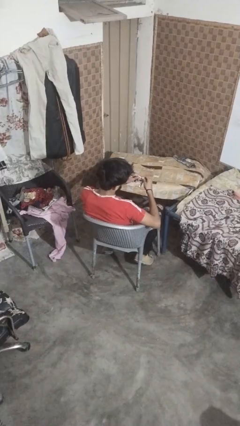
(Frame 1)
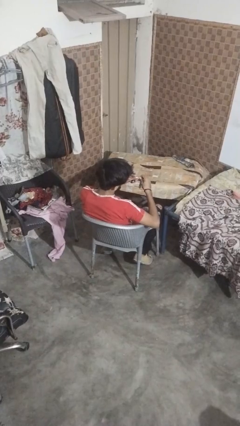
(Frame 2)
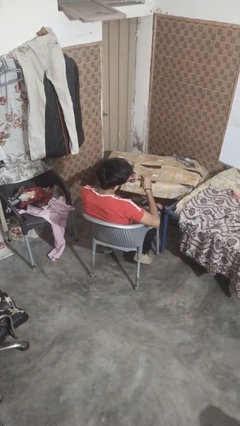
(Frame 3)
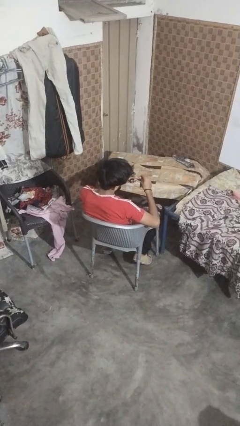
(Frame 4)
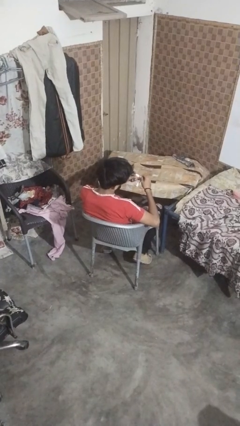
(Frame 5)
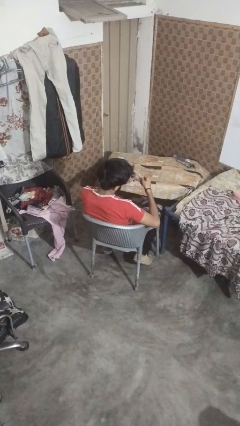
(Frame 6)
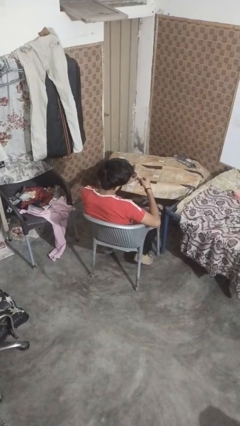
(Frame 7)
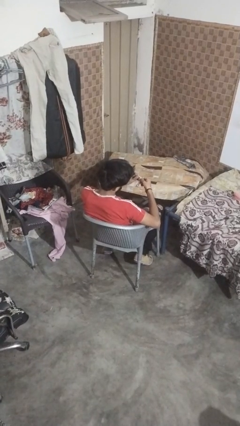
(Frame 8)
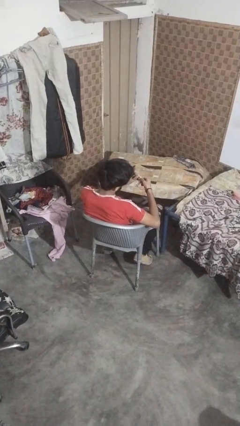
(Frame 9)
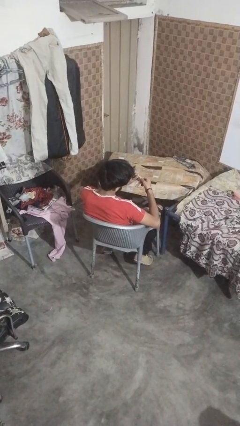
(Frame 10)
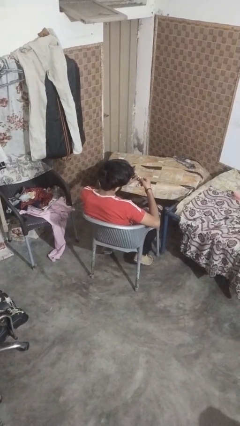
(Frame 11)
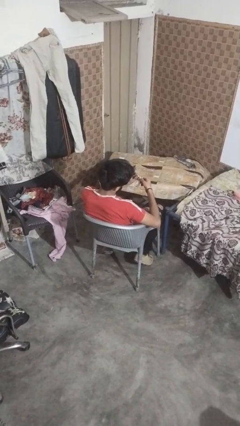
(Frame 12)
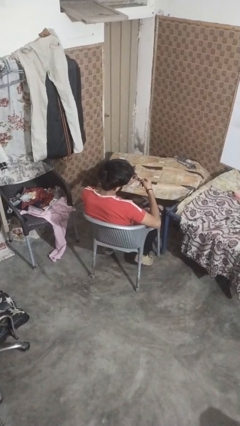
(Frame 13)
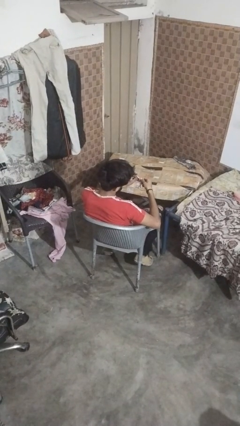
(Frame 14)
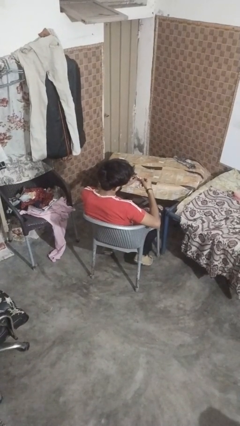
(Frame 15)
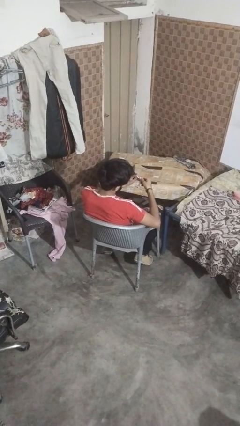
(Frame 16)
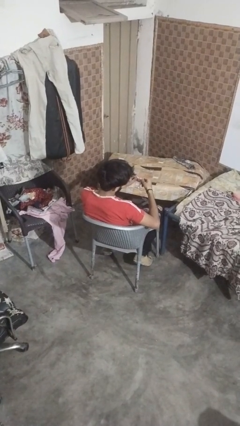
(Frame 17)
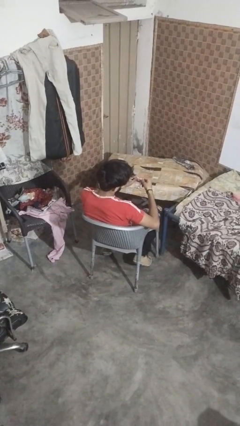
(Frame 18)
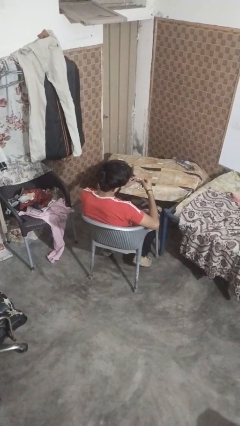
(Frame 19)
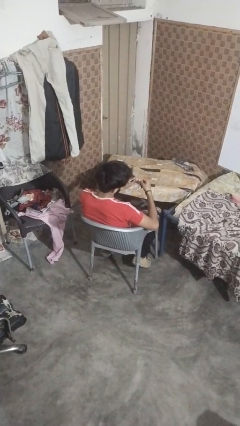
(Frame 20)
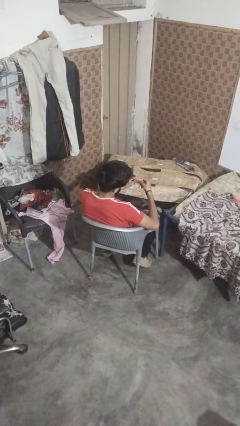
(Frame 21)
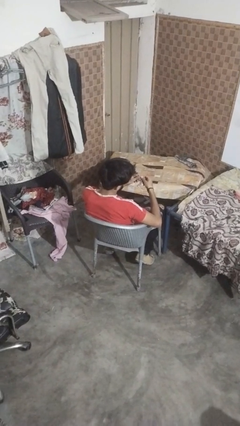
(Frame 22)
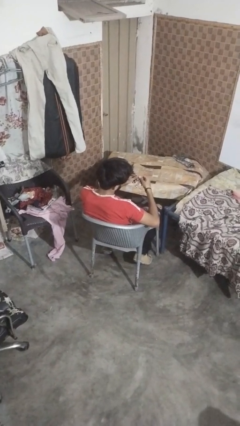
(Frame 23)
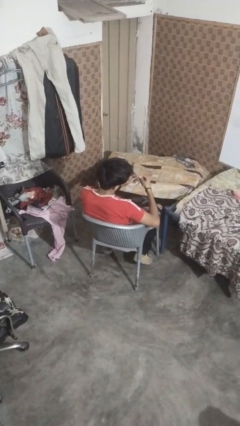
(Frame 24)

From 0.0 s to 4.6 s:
person files fingernails

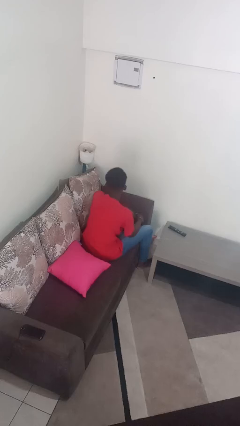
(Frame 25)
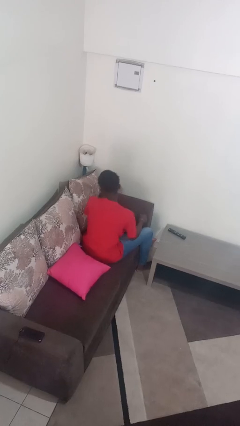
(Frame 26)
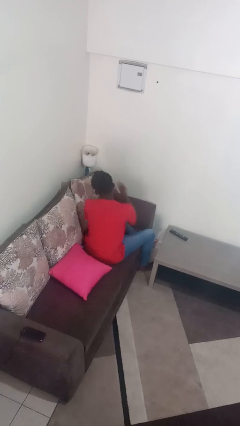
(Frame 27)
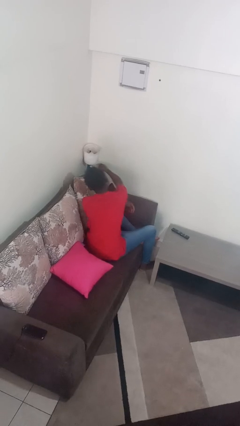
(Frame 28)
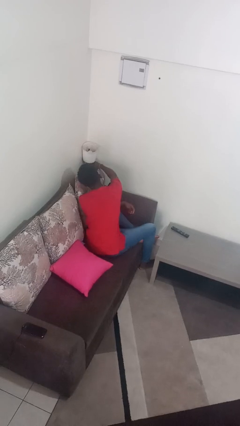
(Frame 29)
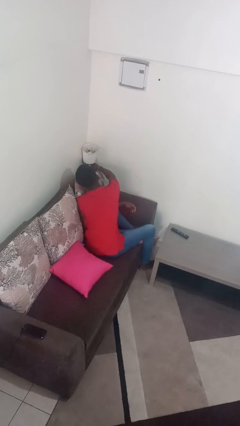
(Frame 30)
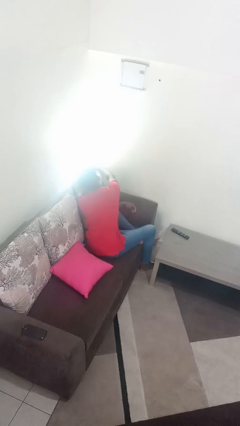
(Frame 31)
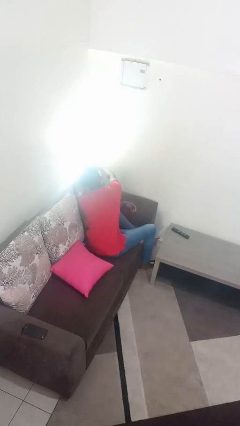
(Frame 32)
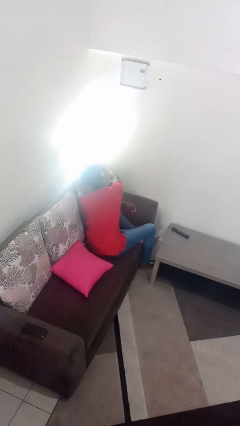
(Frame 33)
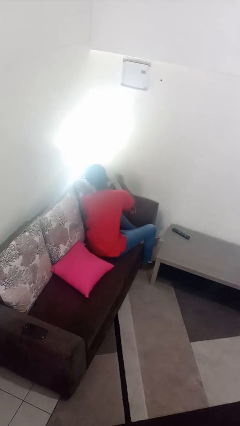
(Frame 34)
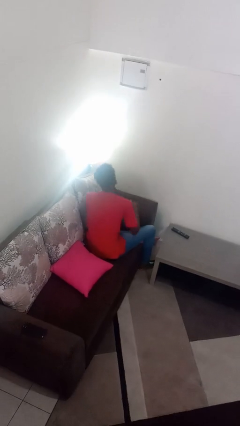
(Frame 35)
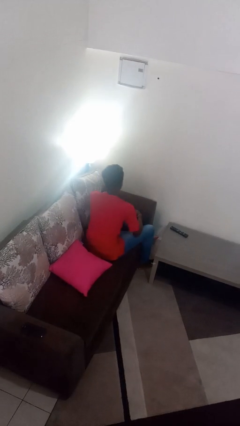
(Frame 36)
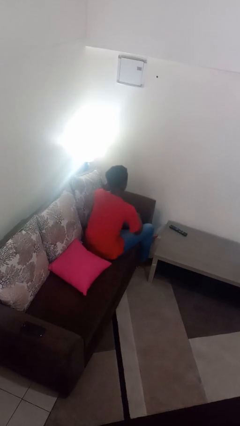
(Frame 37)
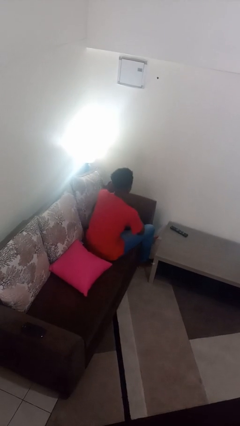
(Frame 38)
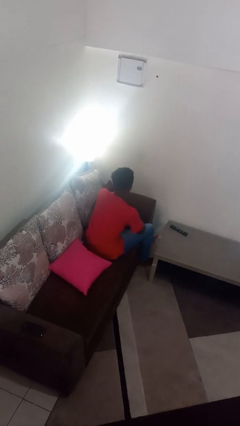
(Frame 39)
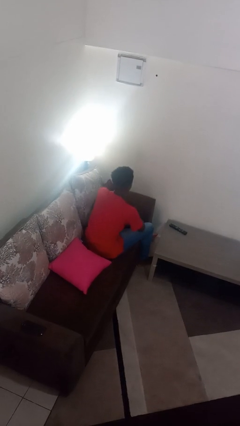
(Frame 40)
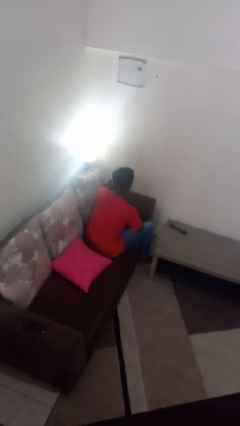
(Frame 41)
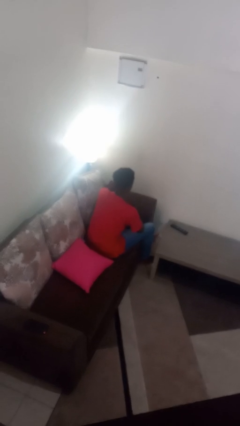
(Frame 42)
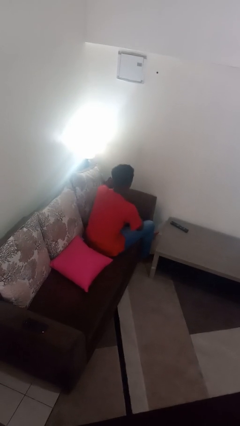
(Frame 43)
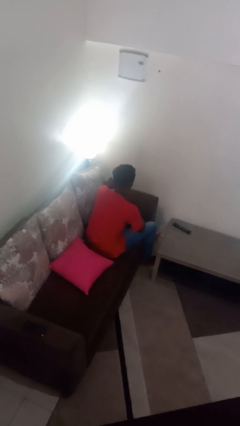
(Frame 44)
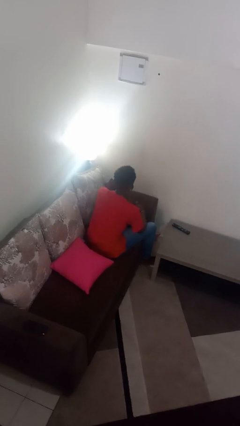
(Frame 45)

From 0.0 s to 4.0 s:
person turns on lamp

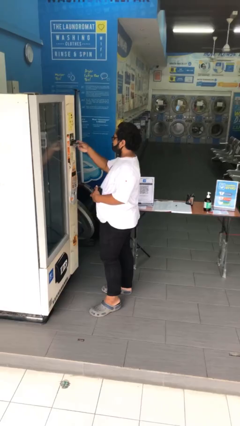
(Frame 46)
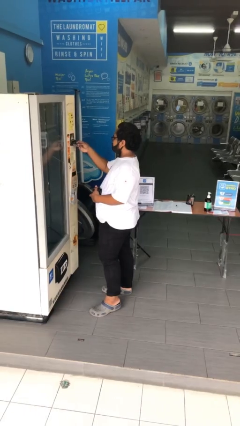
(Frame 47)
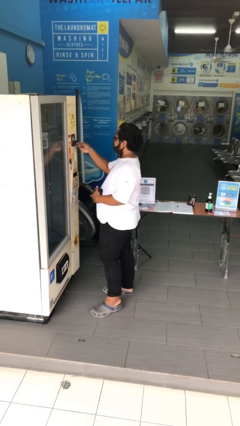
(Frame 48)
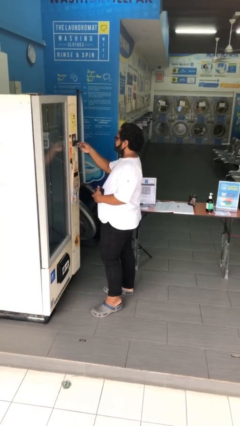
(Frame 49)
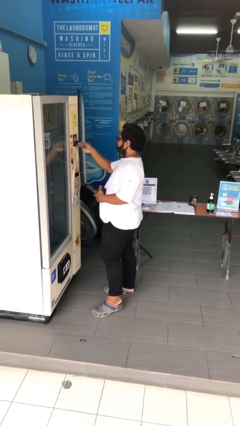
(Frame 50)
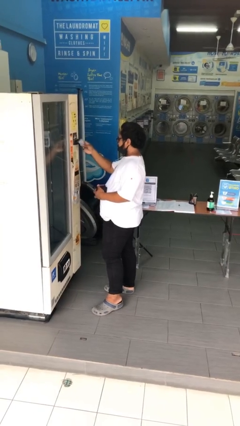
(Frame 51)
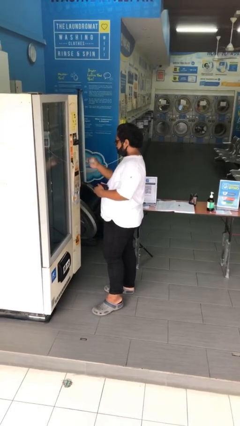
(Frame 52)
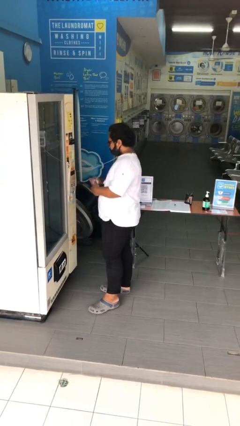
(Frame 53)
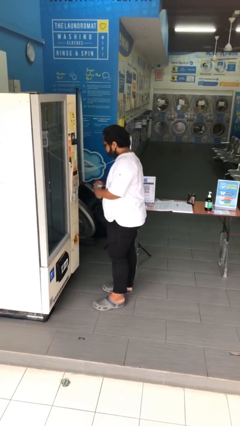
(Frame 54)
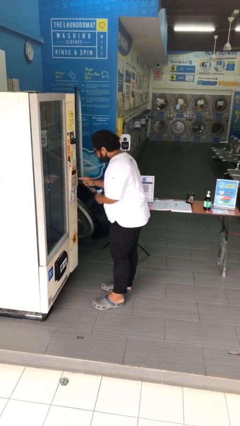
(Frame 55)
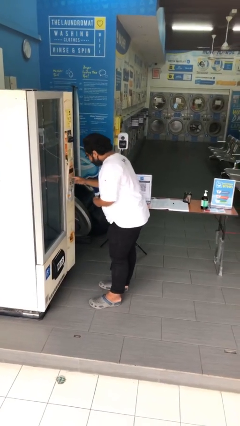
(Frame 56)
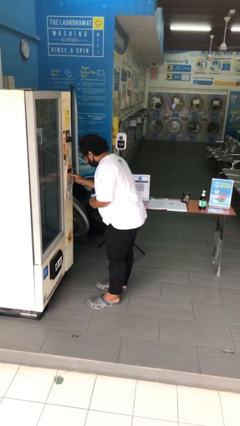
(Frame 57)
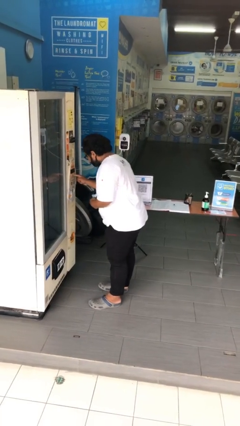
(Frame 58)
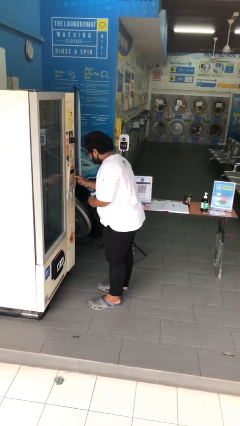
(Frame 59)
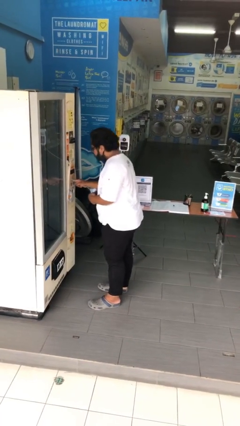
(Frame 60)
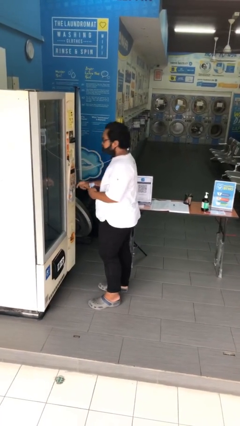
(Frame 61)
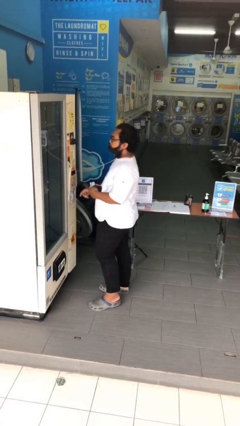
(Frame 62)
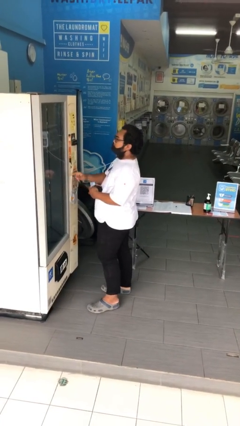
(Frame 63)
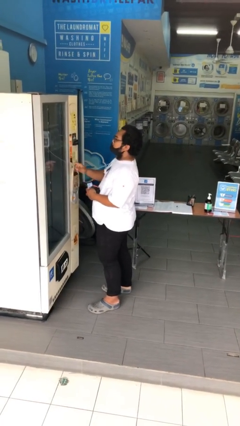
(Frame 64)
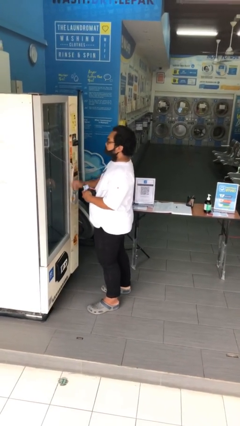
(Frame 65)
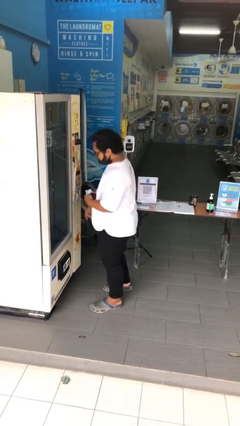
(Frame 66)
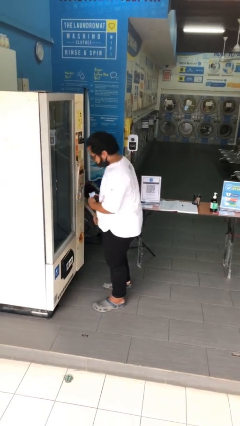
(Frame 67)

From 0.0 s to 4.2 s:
person purchases from machine

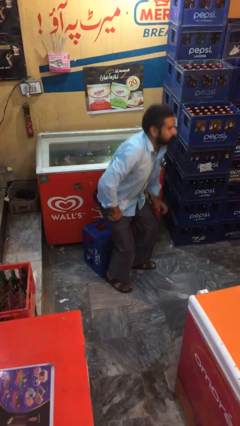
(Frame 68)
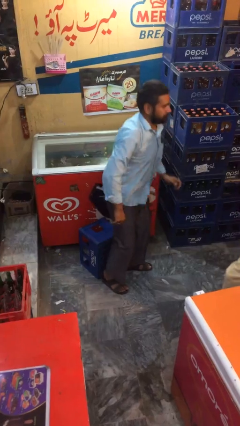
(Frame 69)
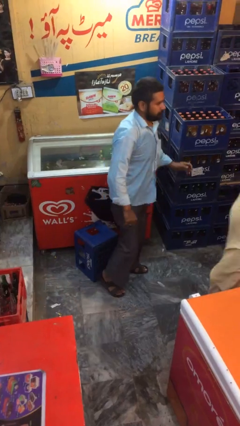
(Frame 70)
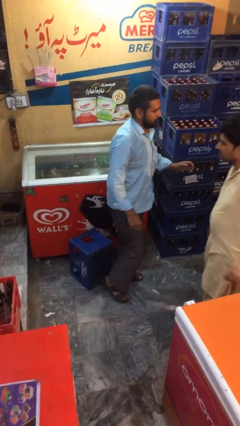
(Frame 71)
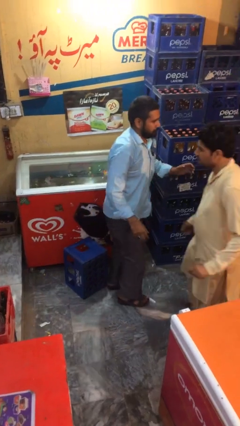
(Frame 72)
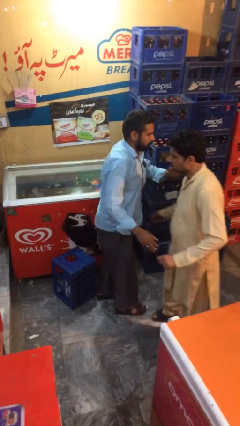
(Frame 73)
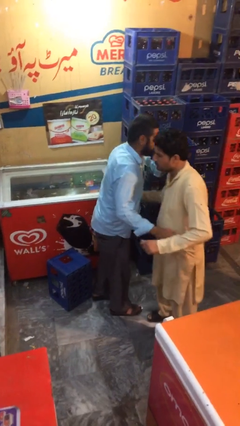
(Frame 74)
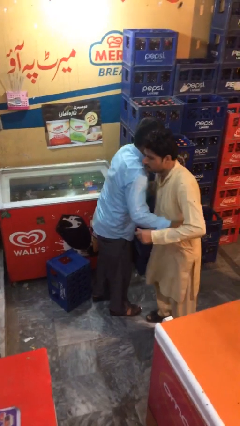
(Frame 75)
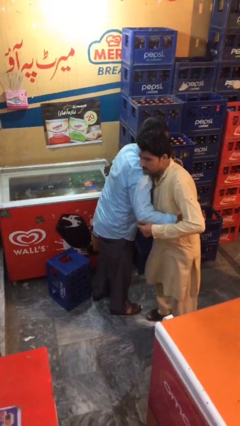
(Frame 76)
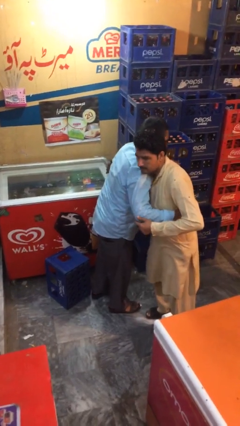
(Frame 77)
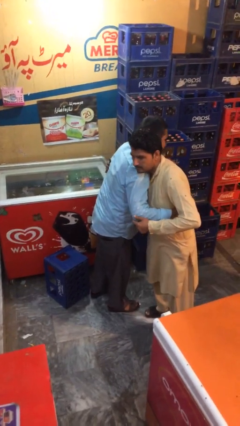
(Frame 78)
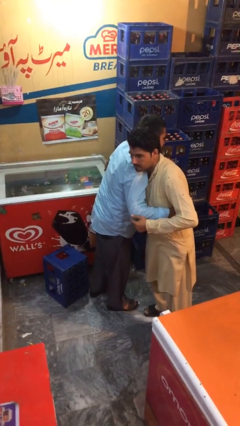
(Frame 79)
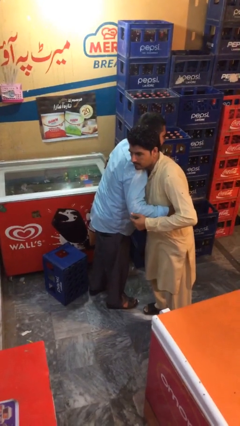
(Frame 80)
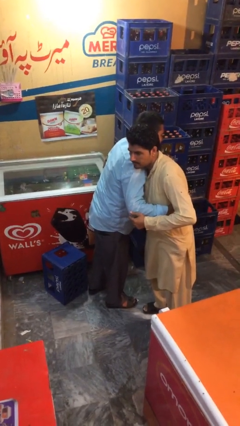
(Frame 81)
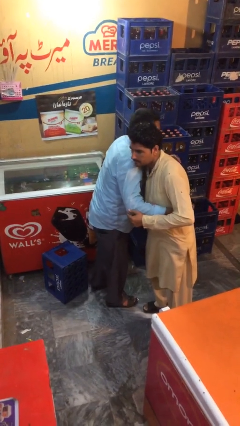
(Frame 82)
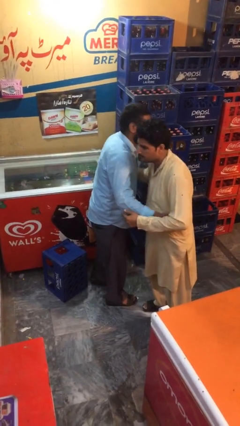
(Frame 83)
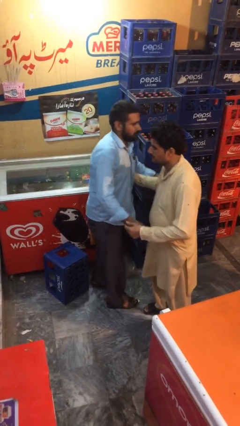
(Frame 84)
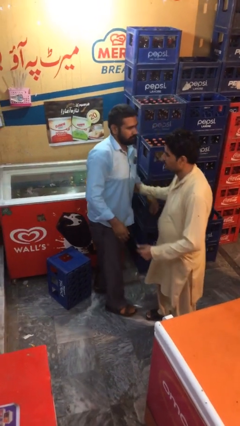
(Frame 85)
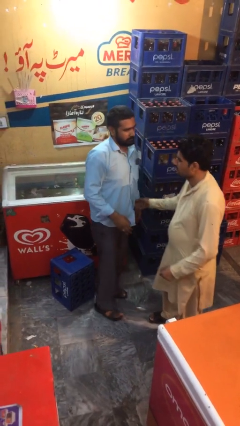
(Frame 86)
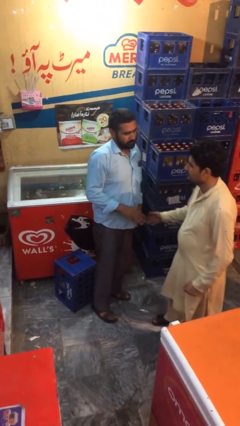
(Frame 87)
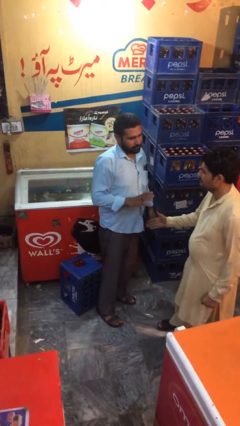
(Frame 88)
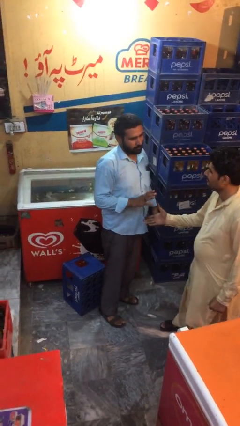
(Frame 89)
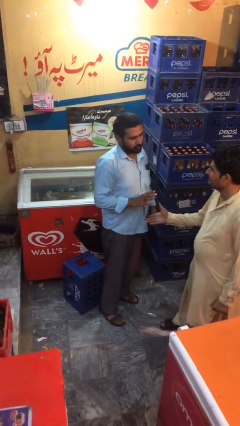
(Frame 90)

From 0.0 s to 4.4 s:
person embraces person

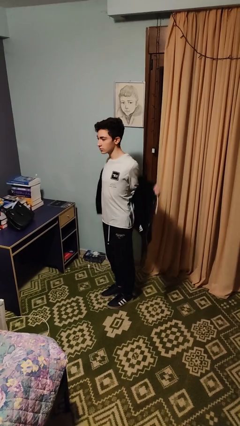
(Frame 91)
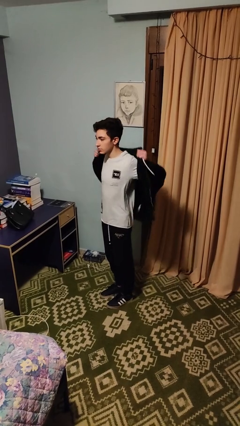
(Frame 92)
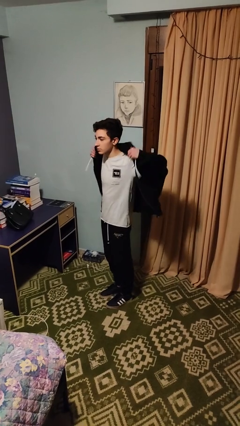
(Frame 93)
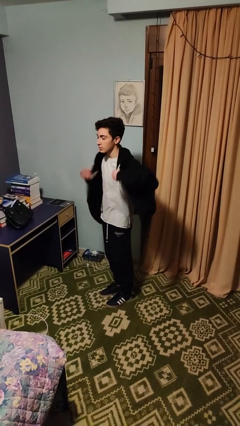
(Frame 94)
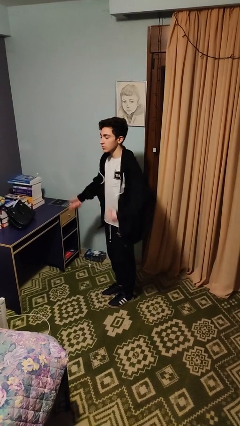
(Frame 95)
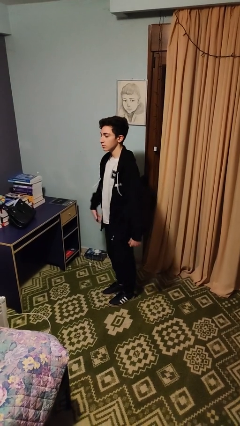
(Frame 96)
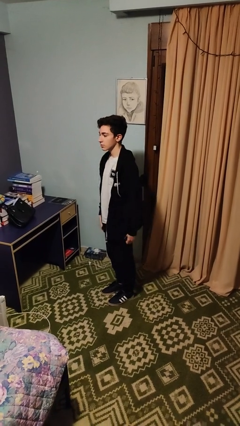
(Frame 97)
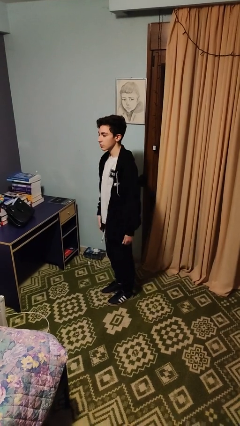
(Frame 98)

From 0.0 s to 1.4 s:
person puts on jacket
